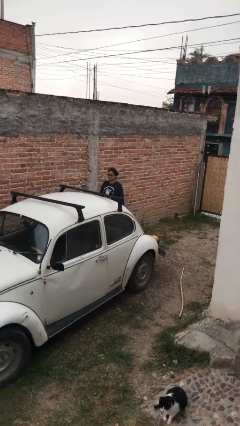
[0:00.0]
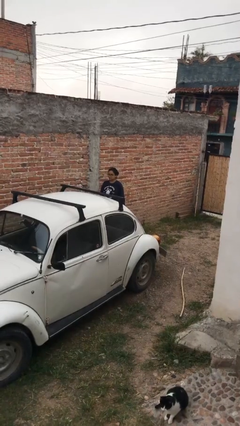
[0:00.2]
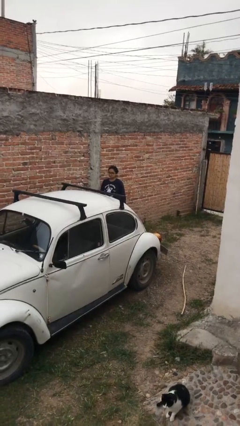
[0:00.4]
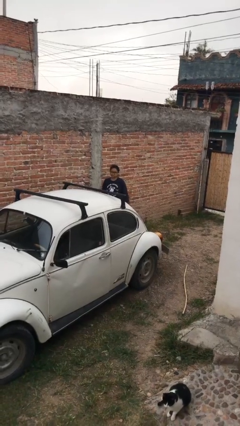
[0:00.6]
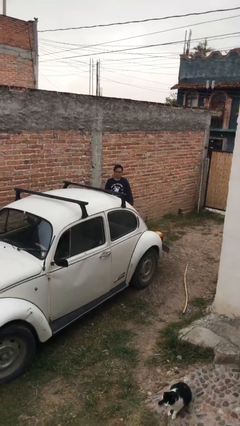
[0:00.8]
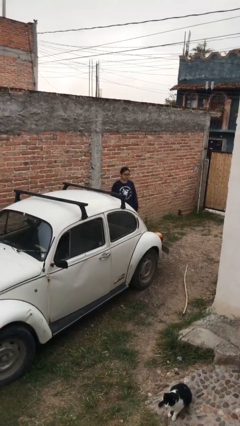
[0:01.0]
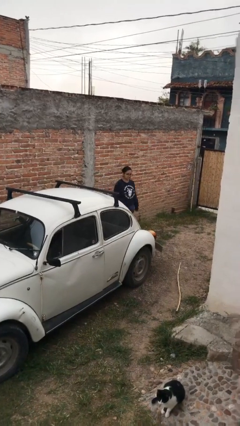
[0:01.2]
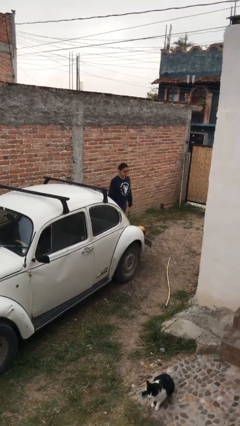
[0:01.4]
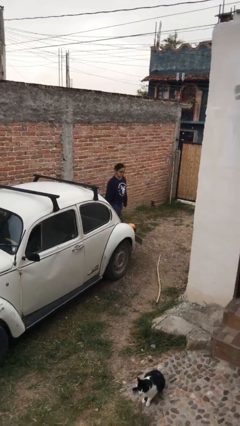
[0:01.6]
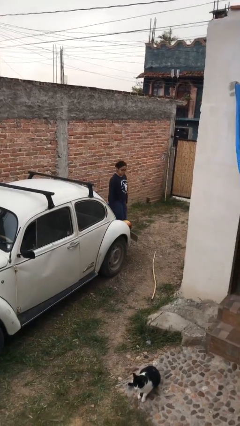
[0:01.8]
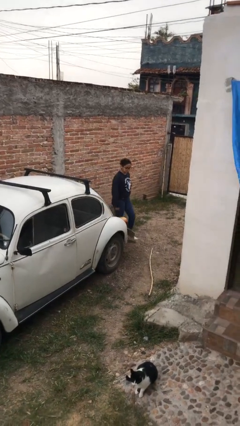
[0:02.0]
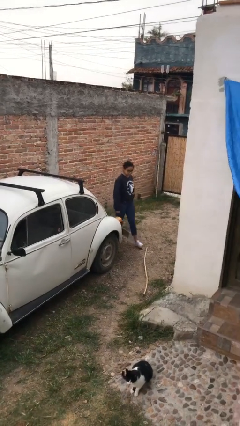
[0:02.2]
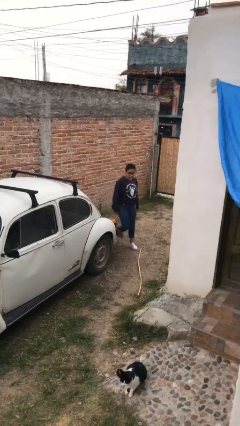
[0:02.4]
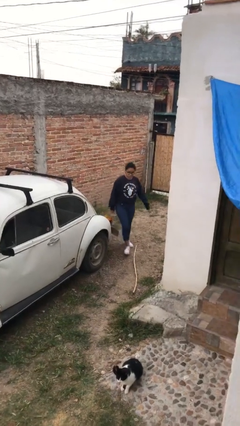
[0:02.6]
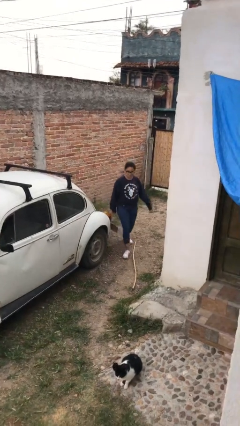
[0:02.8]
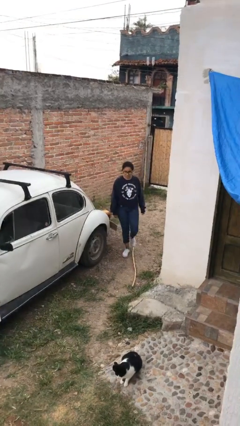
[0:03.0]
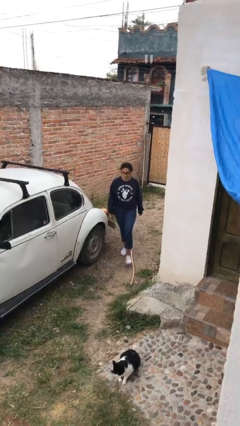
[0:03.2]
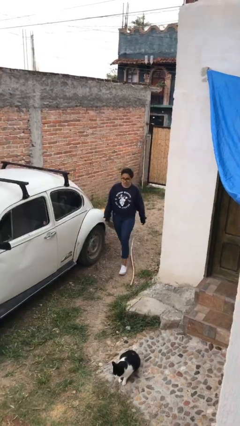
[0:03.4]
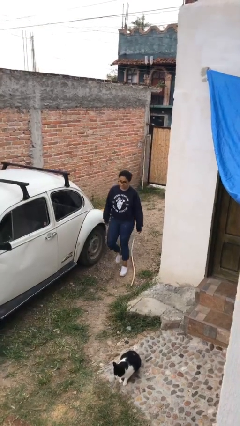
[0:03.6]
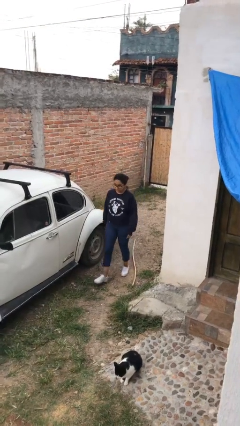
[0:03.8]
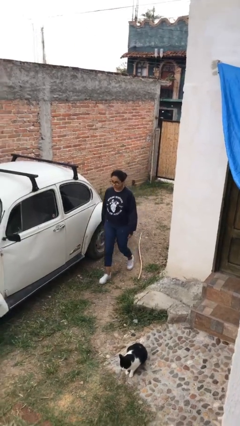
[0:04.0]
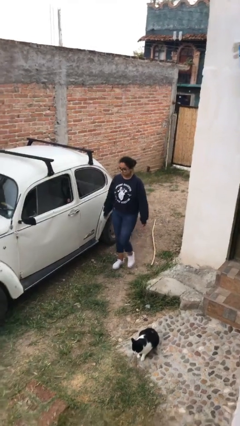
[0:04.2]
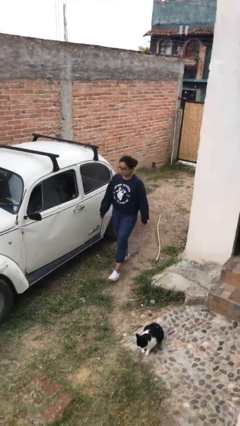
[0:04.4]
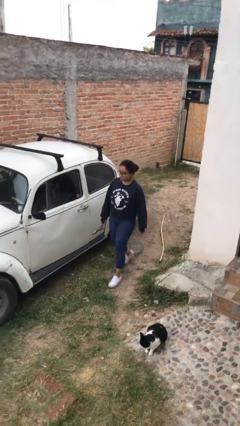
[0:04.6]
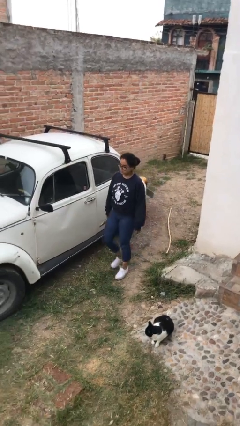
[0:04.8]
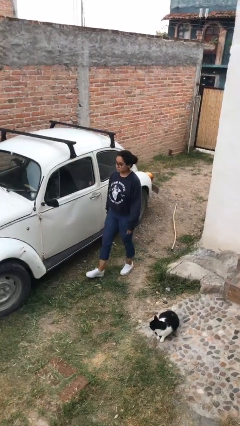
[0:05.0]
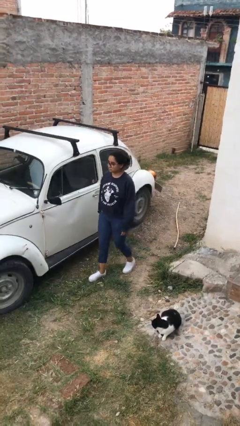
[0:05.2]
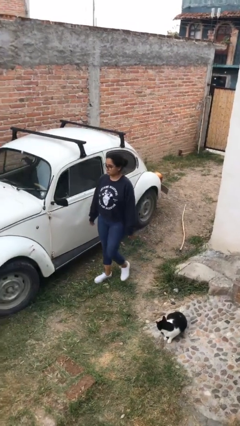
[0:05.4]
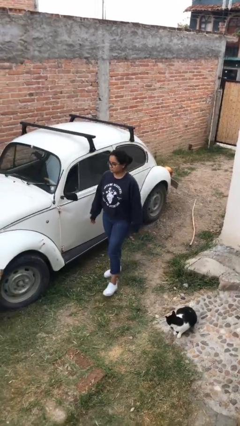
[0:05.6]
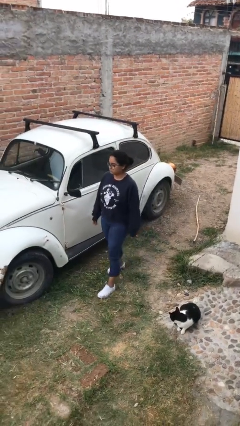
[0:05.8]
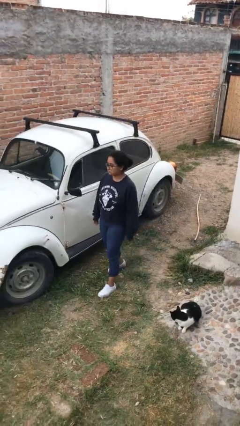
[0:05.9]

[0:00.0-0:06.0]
person walks around car

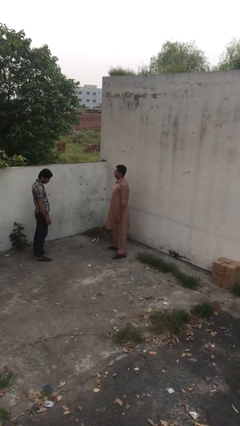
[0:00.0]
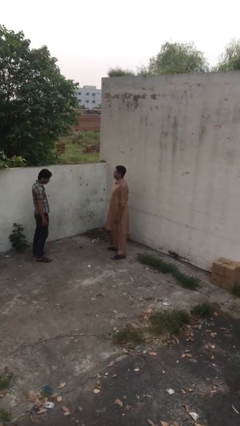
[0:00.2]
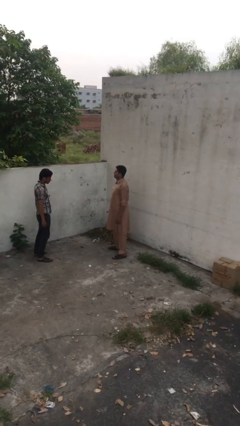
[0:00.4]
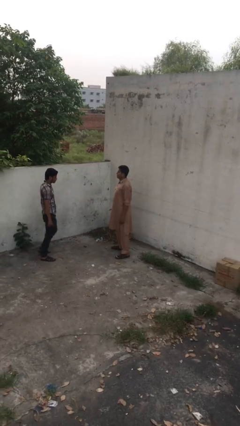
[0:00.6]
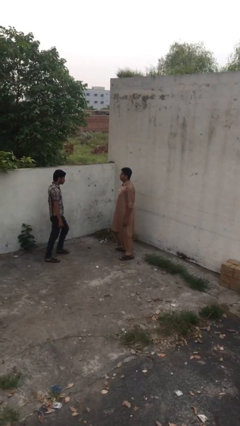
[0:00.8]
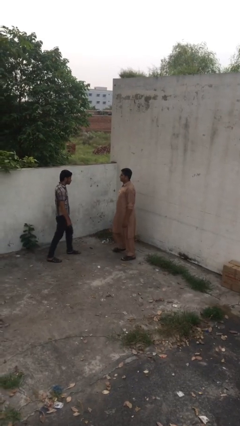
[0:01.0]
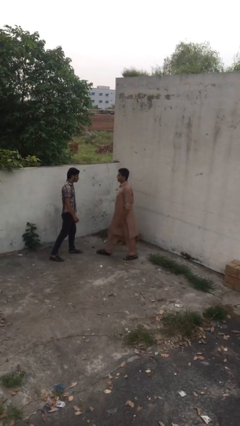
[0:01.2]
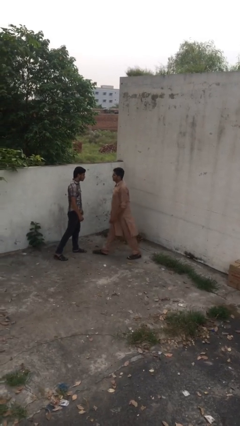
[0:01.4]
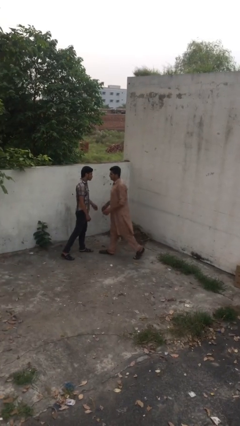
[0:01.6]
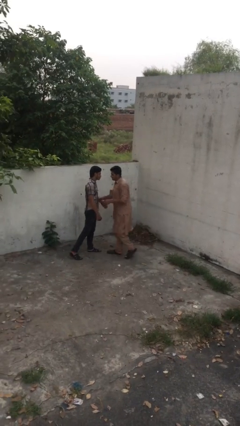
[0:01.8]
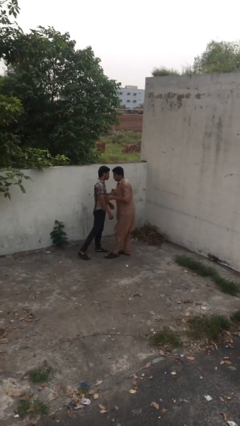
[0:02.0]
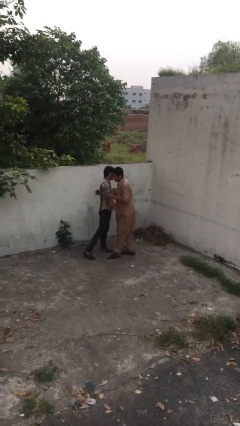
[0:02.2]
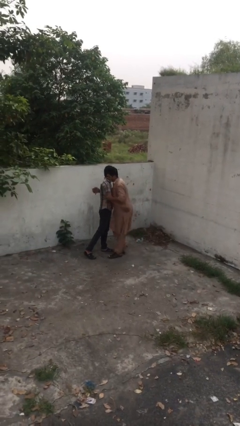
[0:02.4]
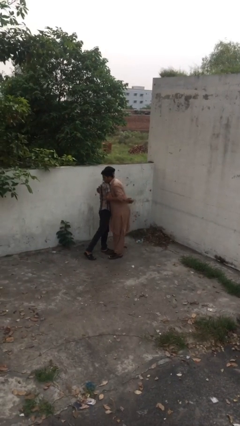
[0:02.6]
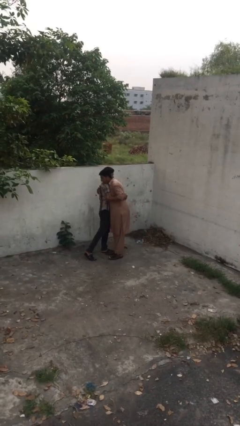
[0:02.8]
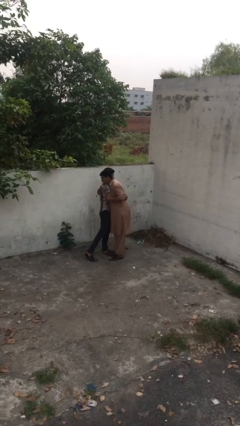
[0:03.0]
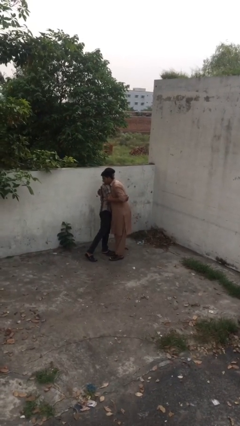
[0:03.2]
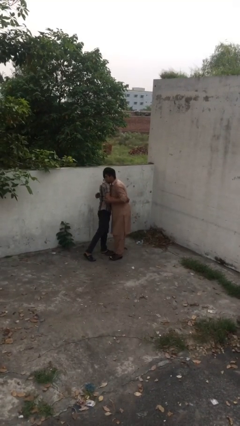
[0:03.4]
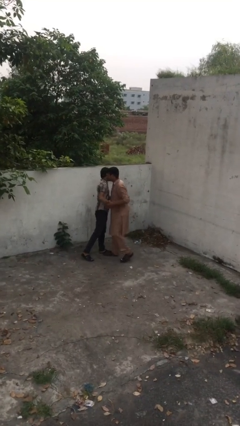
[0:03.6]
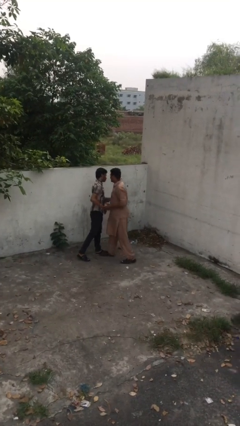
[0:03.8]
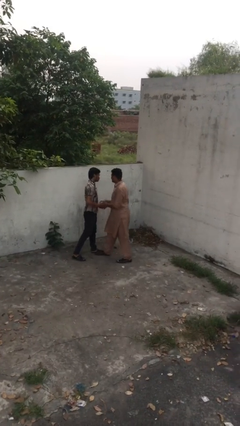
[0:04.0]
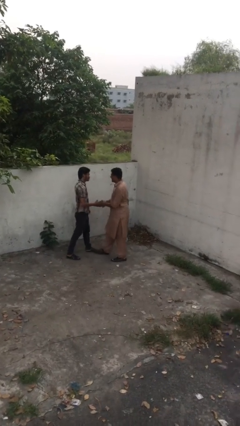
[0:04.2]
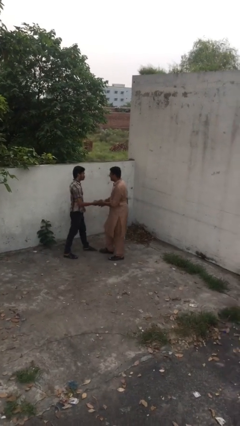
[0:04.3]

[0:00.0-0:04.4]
person embraces person

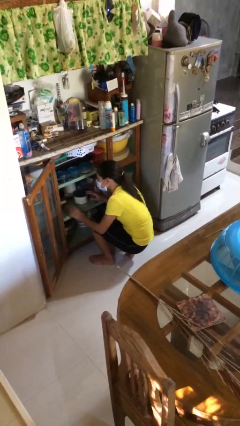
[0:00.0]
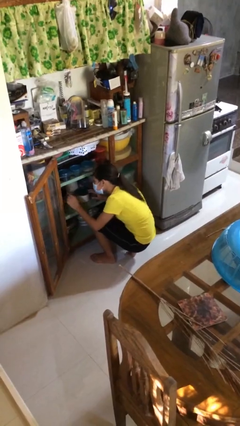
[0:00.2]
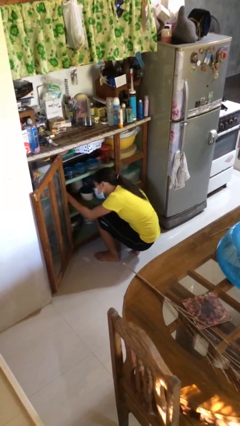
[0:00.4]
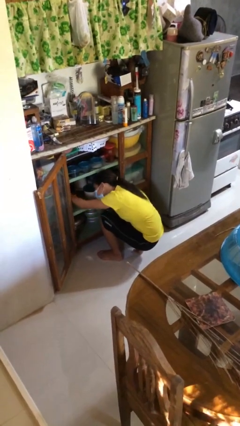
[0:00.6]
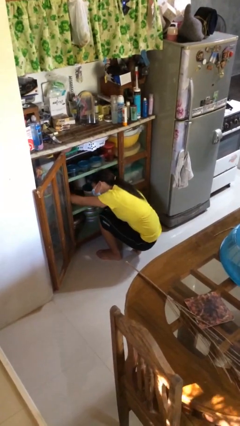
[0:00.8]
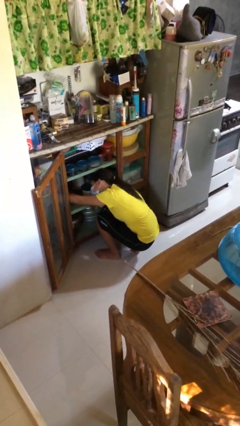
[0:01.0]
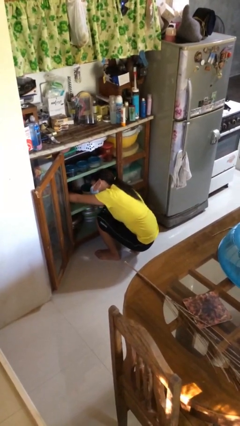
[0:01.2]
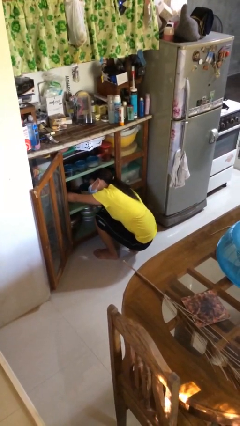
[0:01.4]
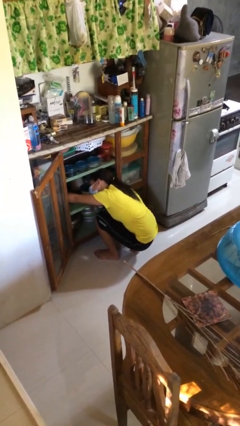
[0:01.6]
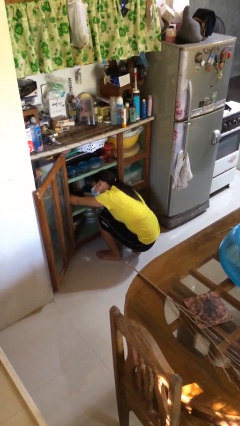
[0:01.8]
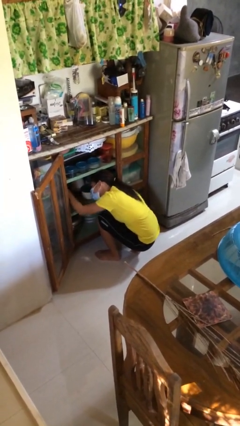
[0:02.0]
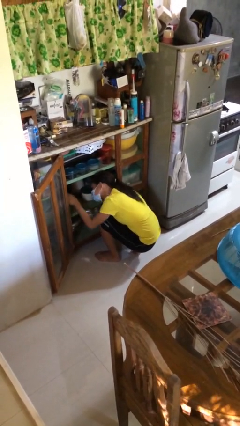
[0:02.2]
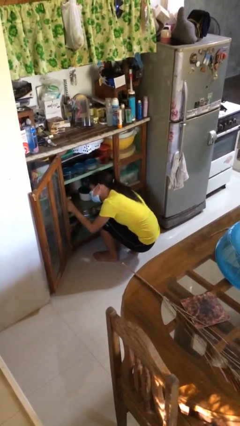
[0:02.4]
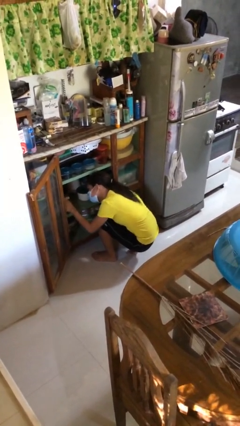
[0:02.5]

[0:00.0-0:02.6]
person searches in cabinet

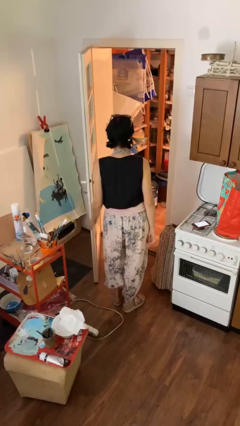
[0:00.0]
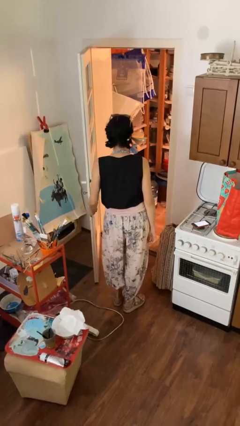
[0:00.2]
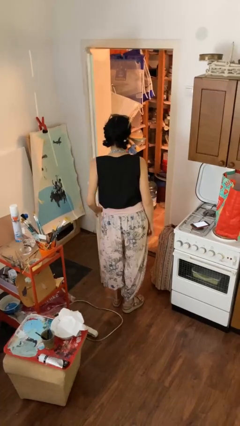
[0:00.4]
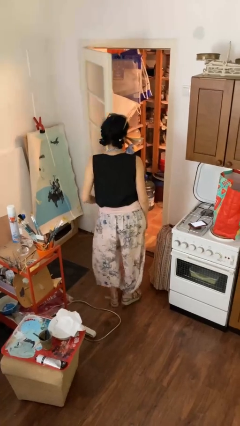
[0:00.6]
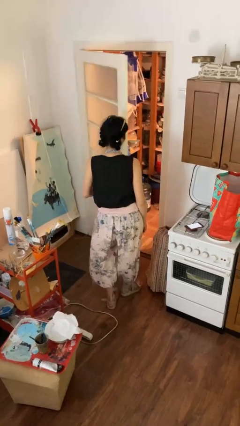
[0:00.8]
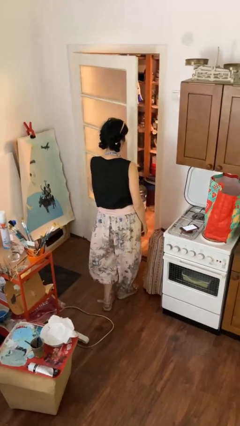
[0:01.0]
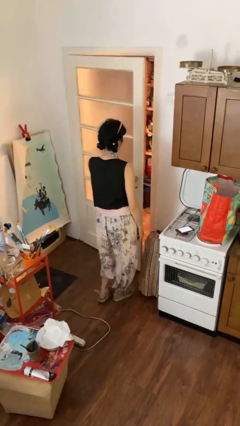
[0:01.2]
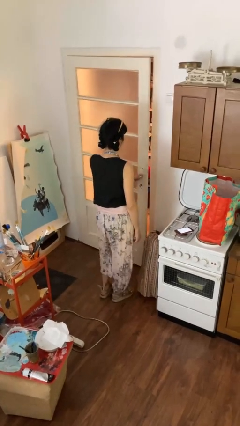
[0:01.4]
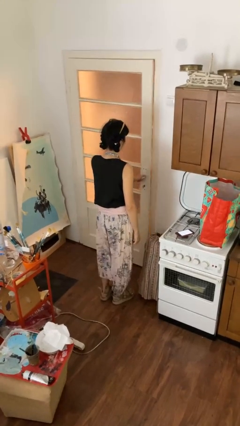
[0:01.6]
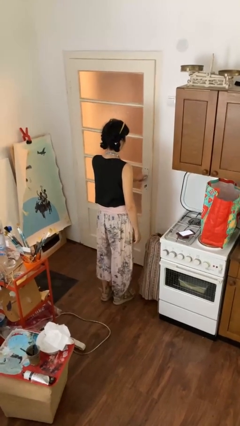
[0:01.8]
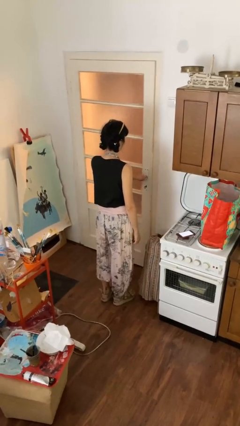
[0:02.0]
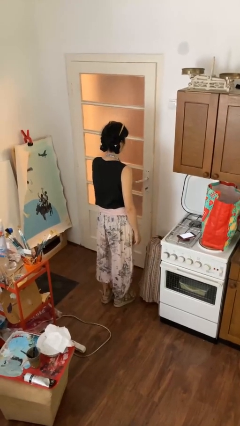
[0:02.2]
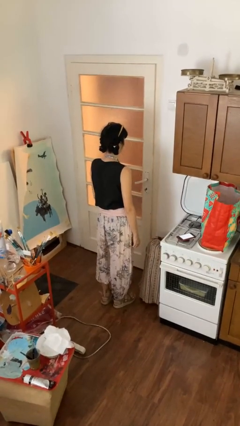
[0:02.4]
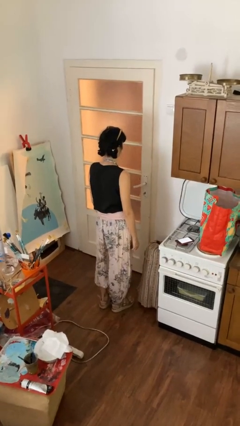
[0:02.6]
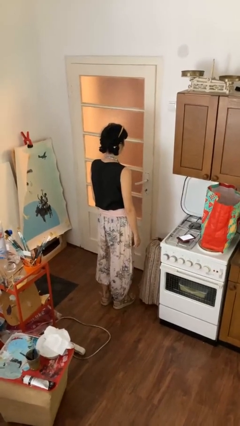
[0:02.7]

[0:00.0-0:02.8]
person closes facility door

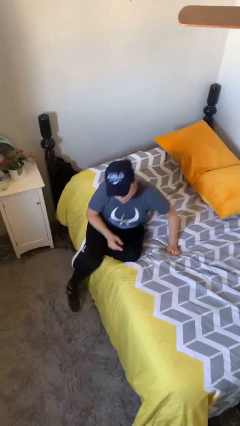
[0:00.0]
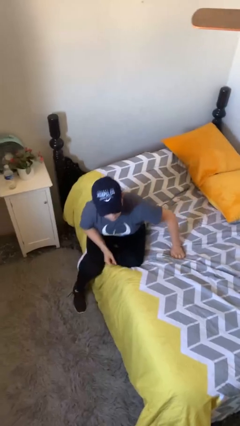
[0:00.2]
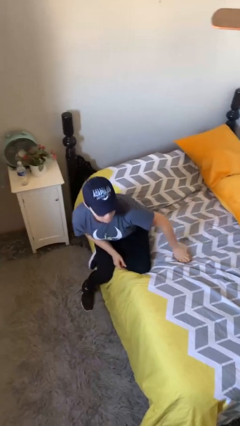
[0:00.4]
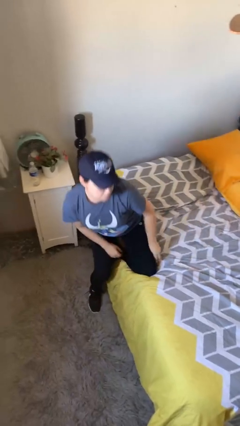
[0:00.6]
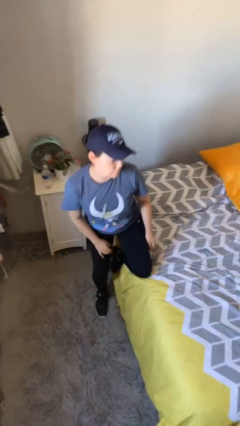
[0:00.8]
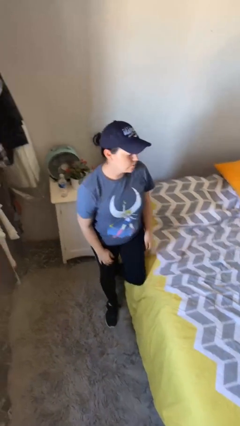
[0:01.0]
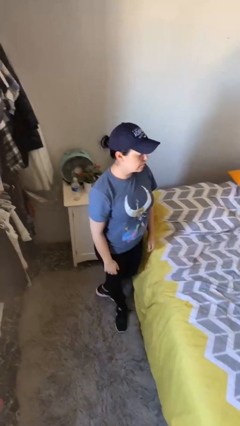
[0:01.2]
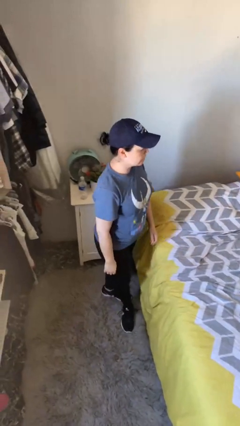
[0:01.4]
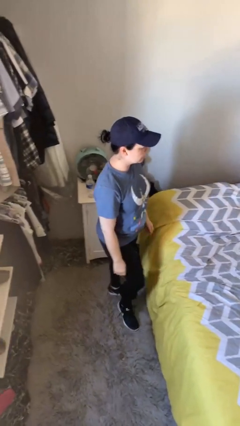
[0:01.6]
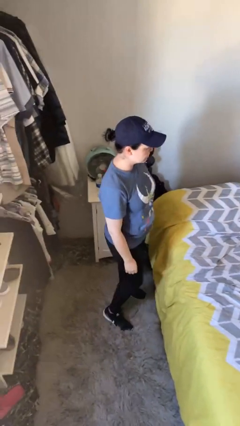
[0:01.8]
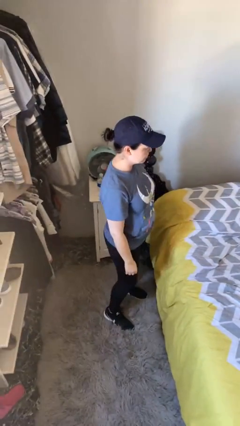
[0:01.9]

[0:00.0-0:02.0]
person stands up
